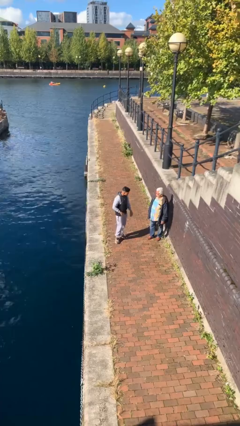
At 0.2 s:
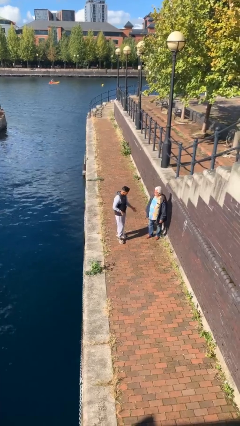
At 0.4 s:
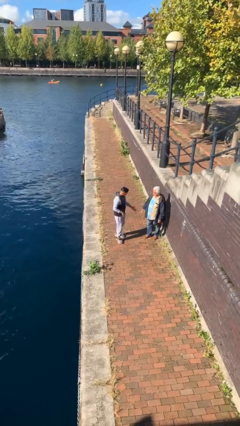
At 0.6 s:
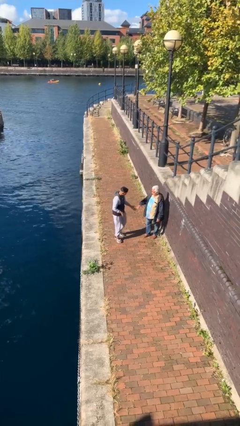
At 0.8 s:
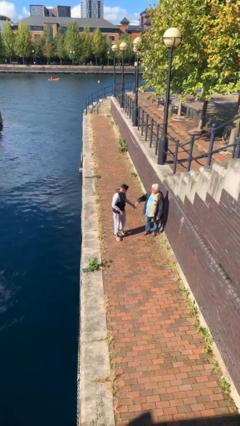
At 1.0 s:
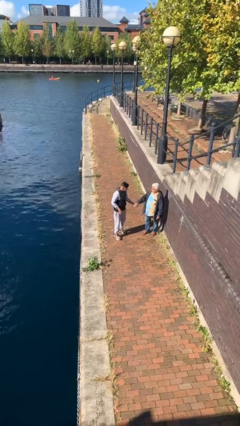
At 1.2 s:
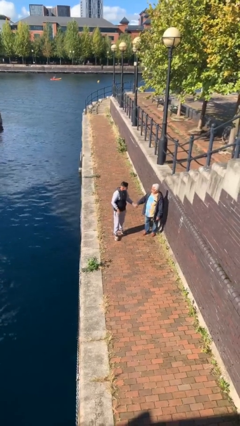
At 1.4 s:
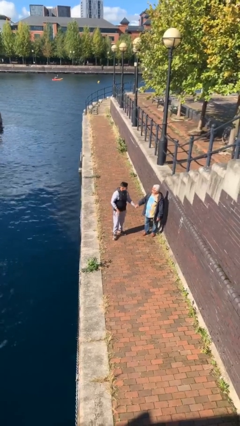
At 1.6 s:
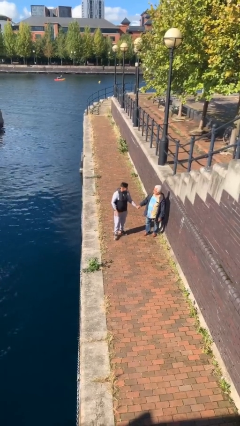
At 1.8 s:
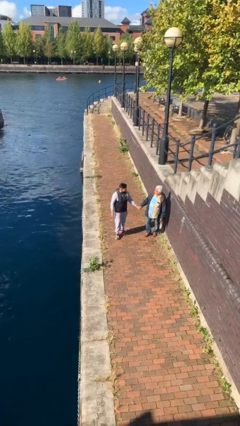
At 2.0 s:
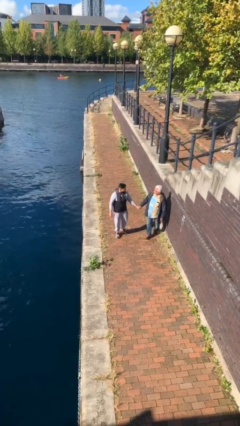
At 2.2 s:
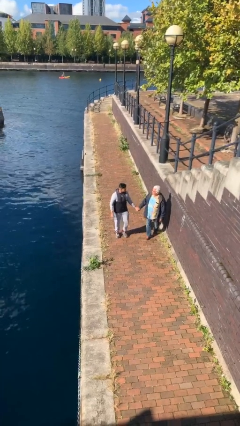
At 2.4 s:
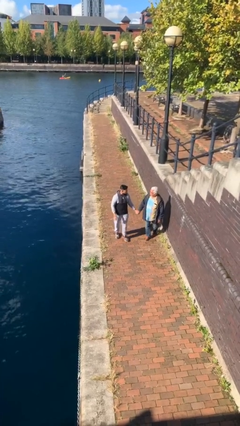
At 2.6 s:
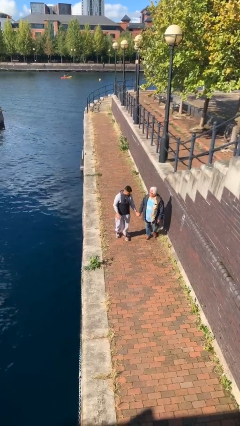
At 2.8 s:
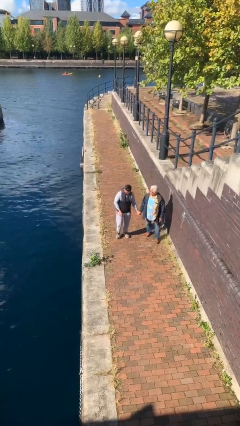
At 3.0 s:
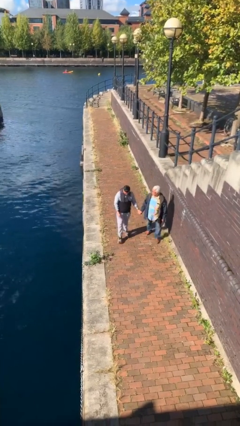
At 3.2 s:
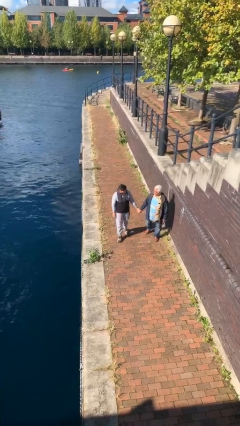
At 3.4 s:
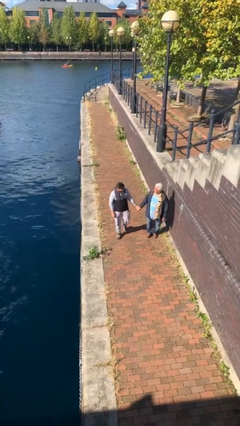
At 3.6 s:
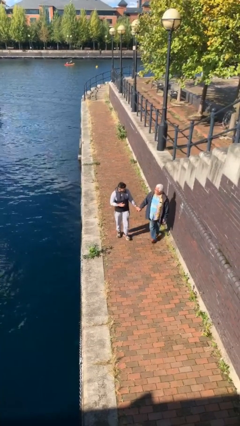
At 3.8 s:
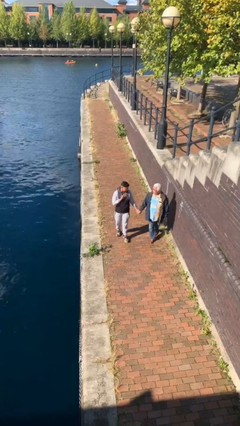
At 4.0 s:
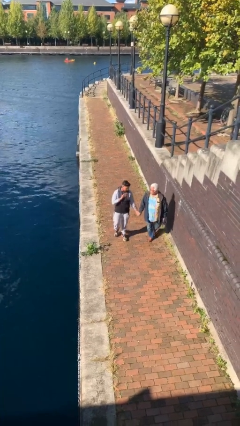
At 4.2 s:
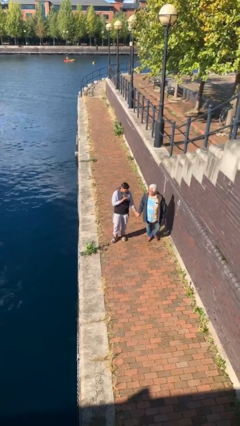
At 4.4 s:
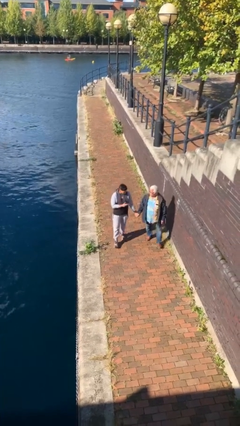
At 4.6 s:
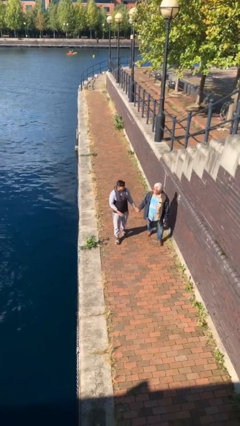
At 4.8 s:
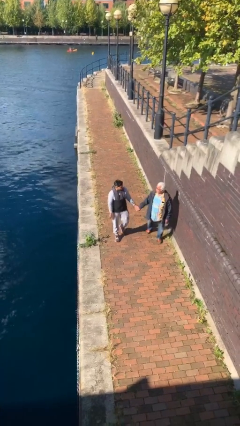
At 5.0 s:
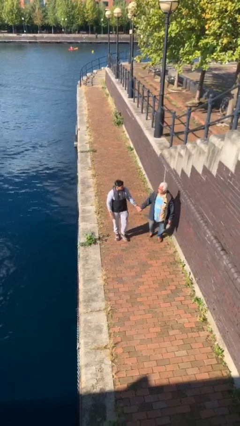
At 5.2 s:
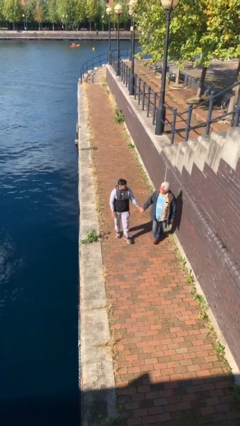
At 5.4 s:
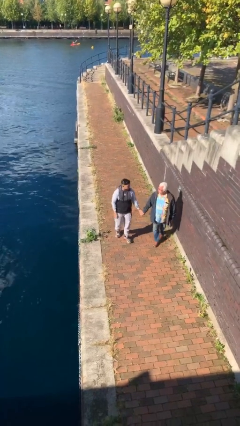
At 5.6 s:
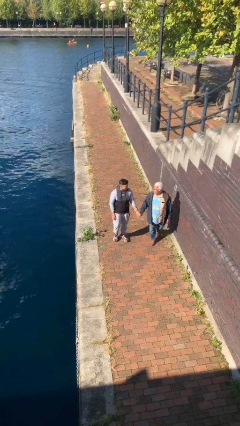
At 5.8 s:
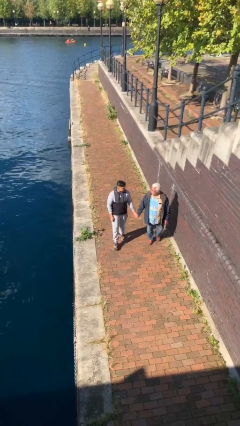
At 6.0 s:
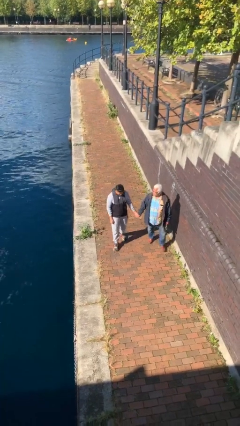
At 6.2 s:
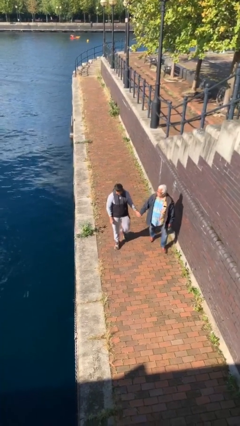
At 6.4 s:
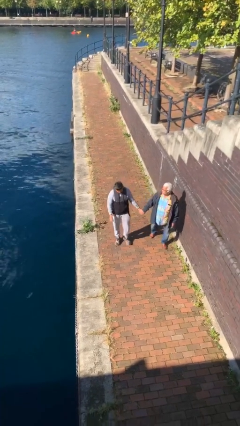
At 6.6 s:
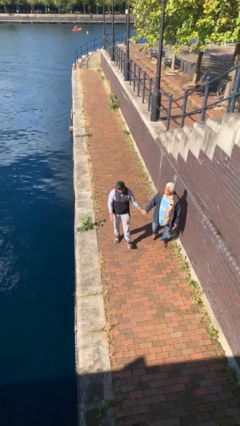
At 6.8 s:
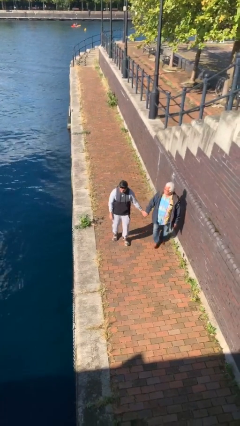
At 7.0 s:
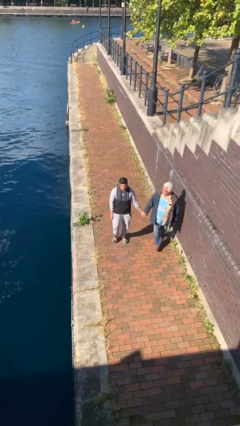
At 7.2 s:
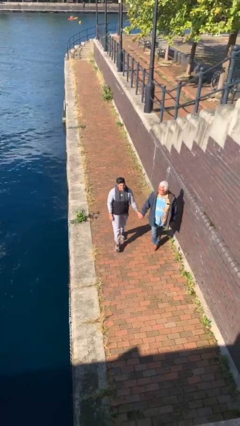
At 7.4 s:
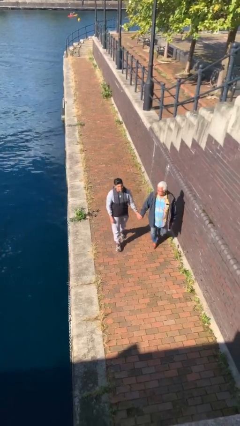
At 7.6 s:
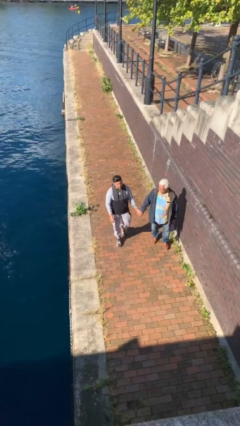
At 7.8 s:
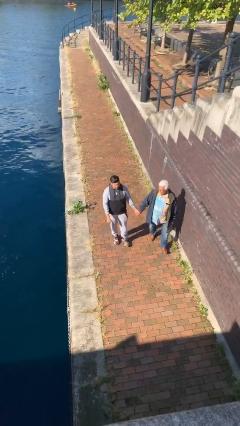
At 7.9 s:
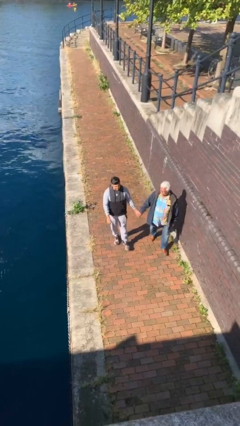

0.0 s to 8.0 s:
person holds hand

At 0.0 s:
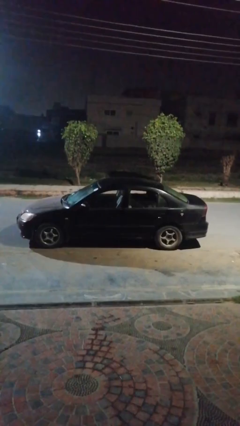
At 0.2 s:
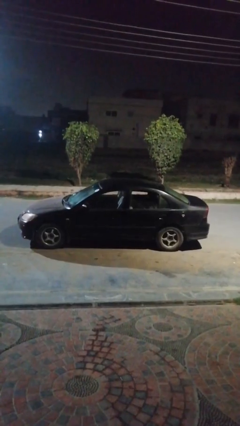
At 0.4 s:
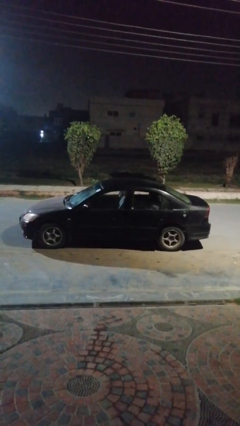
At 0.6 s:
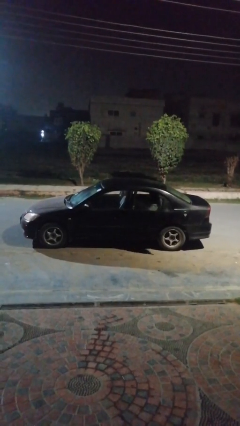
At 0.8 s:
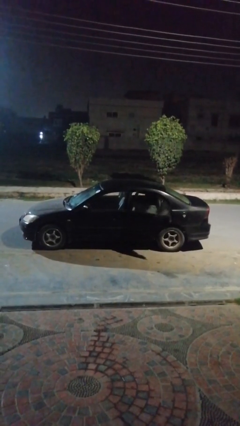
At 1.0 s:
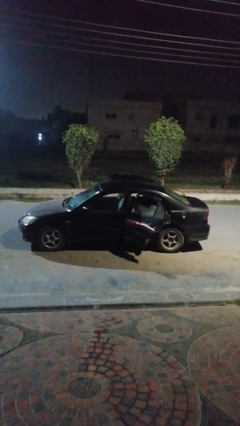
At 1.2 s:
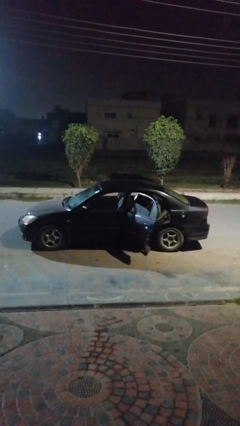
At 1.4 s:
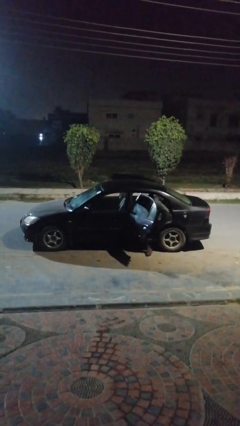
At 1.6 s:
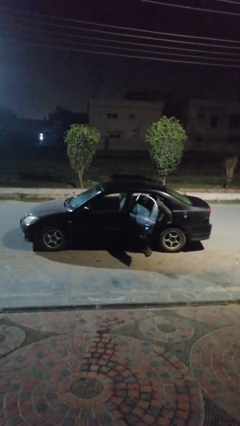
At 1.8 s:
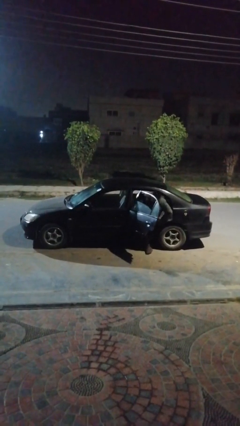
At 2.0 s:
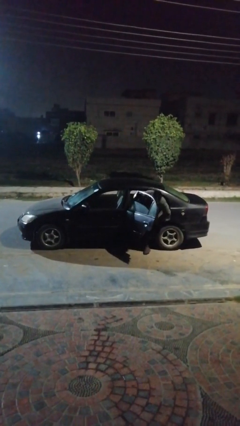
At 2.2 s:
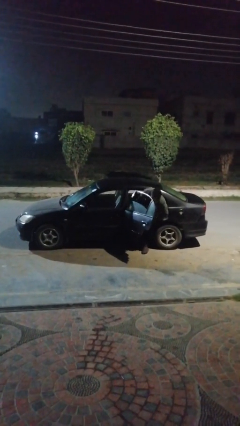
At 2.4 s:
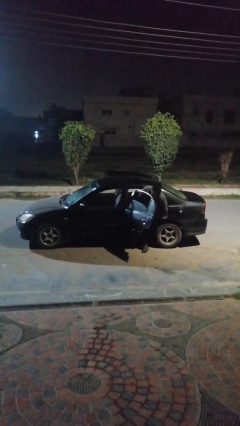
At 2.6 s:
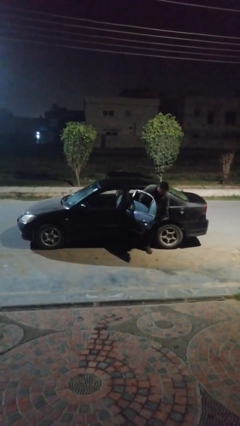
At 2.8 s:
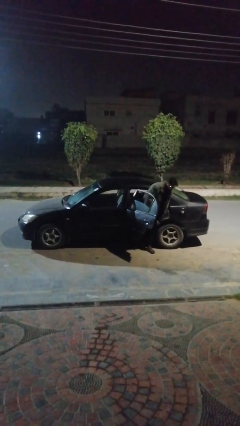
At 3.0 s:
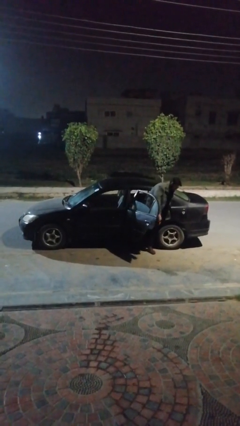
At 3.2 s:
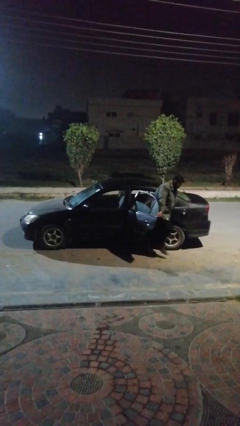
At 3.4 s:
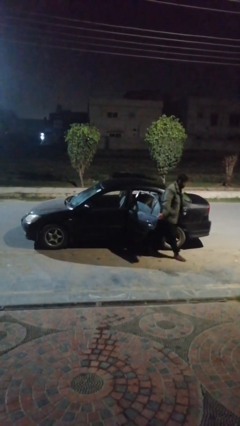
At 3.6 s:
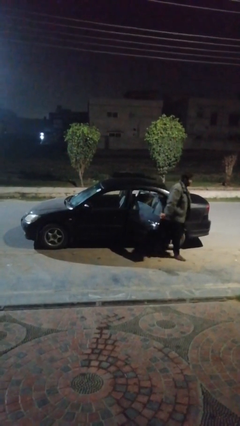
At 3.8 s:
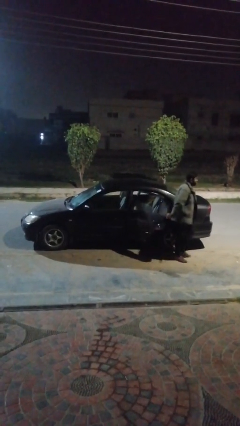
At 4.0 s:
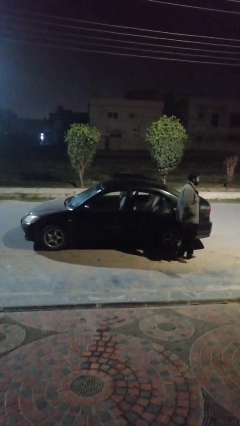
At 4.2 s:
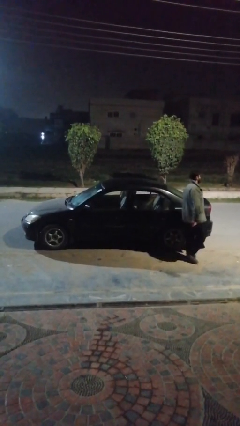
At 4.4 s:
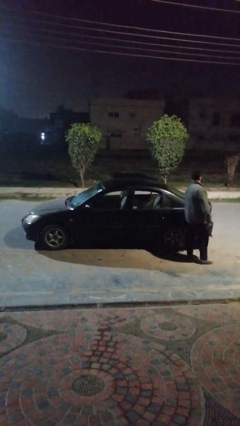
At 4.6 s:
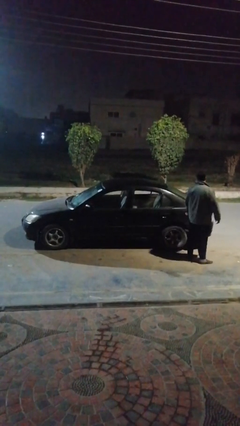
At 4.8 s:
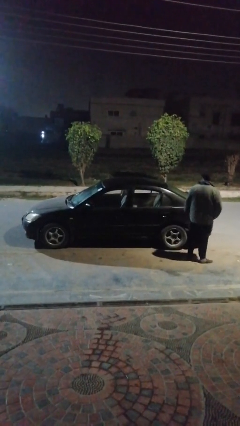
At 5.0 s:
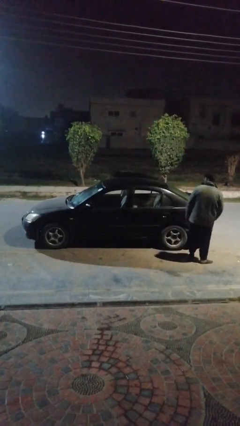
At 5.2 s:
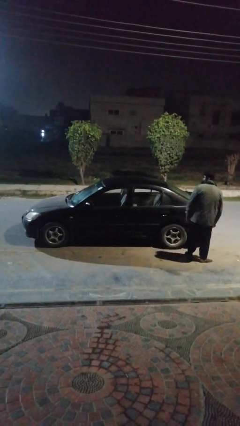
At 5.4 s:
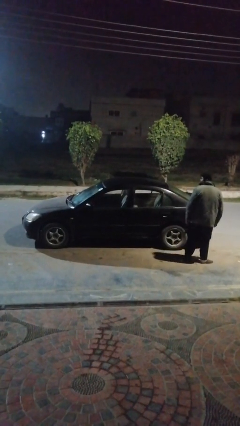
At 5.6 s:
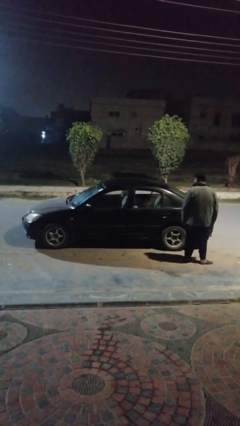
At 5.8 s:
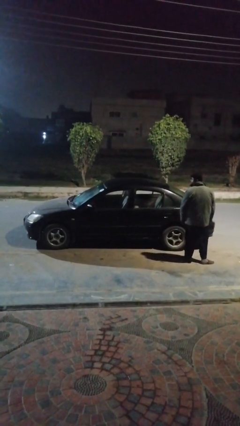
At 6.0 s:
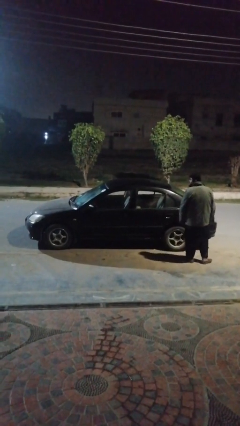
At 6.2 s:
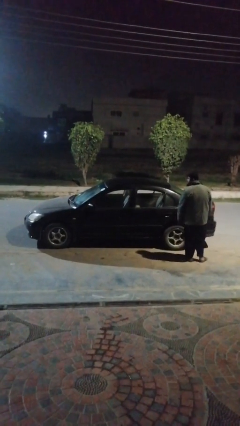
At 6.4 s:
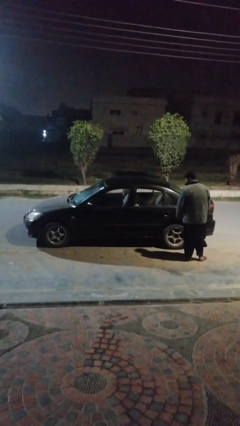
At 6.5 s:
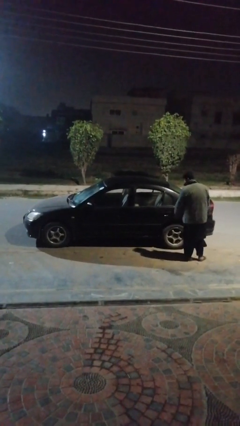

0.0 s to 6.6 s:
car drops off person

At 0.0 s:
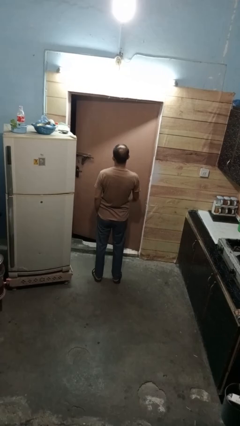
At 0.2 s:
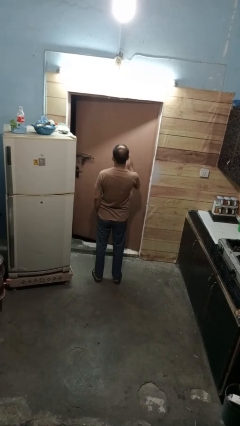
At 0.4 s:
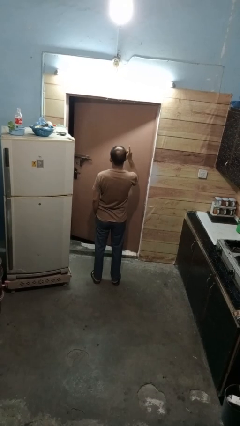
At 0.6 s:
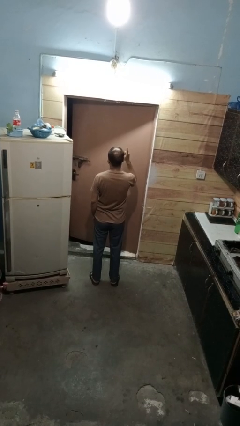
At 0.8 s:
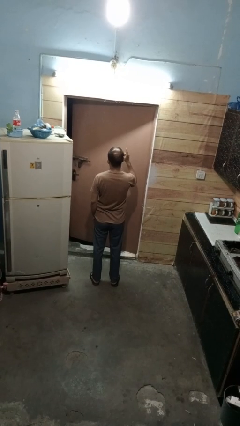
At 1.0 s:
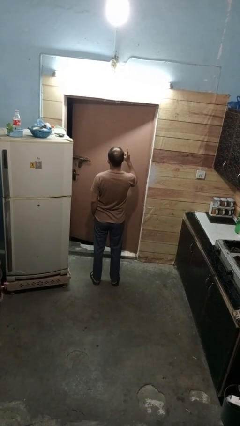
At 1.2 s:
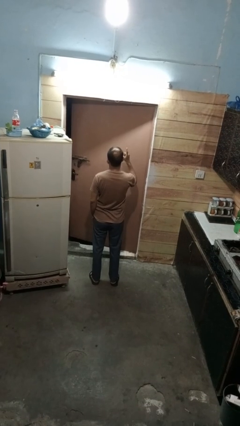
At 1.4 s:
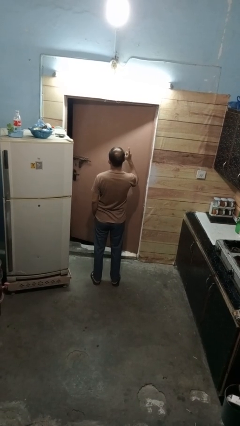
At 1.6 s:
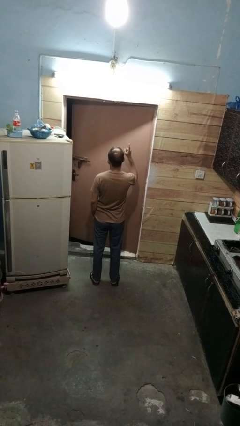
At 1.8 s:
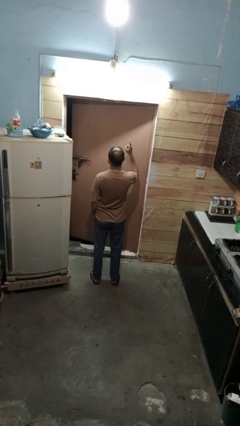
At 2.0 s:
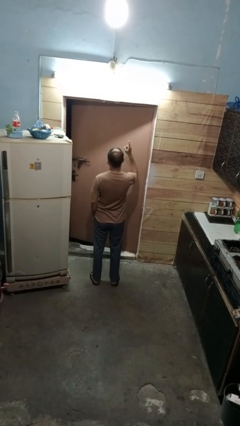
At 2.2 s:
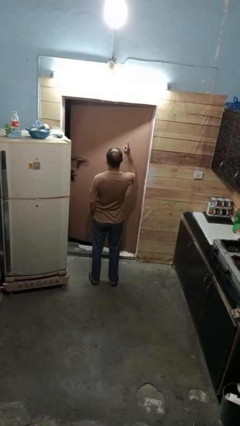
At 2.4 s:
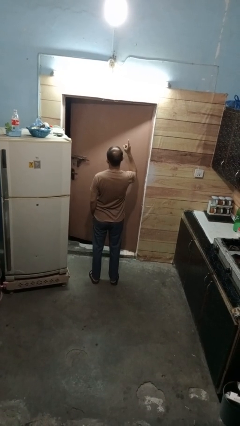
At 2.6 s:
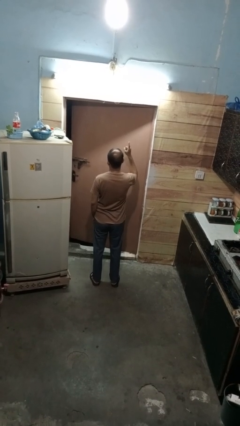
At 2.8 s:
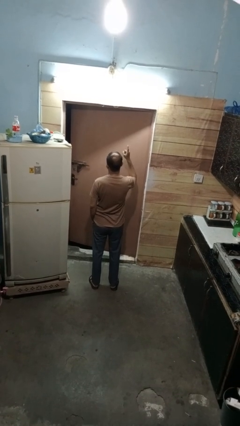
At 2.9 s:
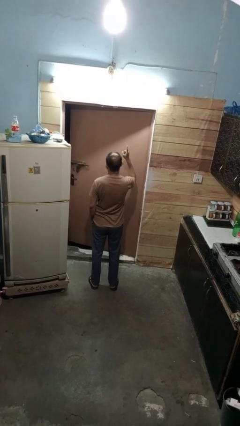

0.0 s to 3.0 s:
person gestures number one

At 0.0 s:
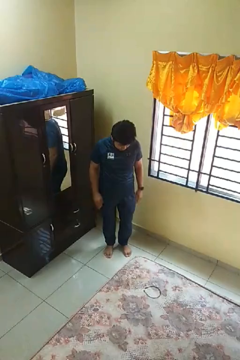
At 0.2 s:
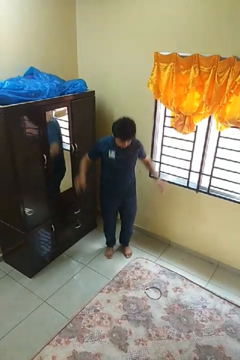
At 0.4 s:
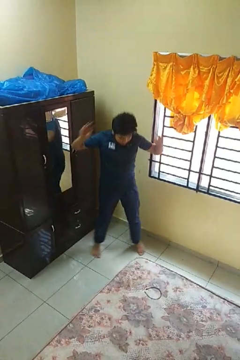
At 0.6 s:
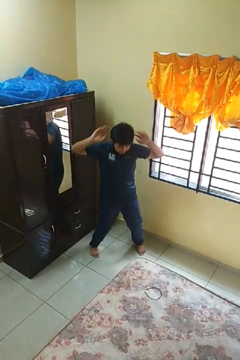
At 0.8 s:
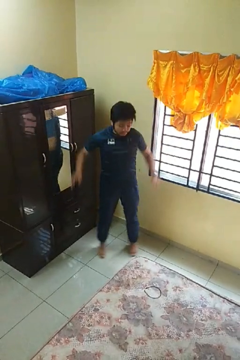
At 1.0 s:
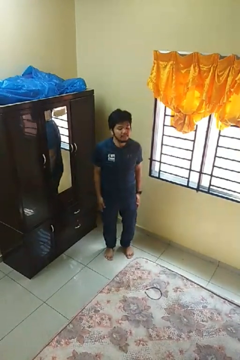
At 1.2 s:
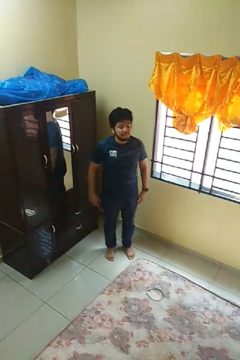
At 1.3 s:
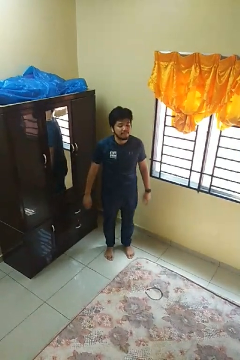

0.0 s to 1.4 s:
person exercises with jumping jacks
